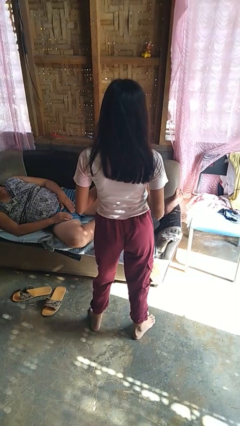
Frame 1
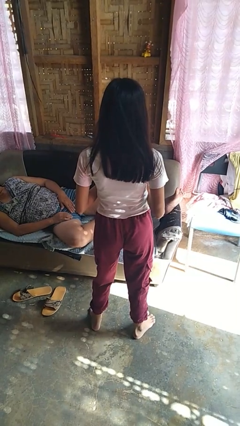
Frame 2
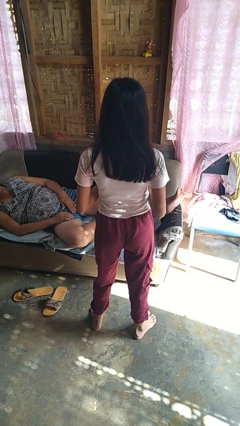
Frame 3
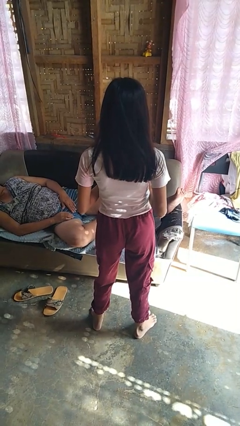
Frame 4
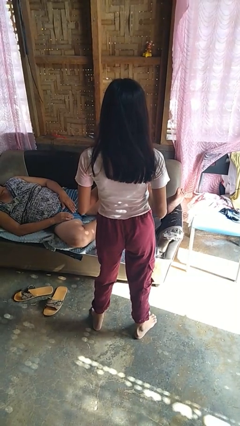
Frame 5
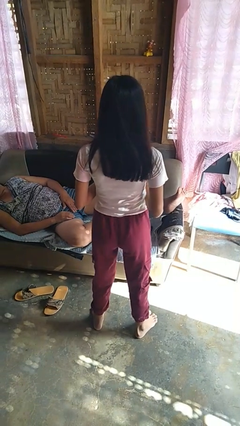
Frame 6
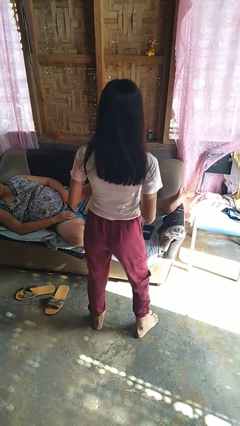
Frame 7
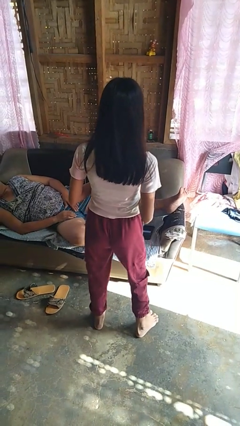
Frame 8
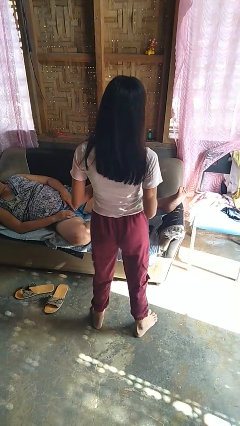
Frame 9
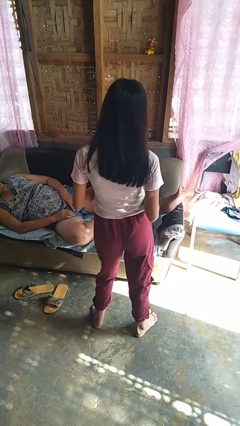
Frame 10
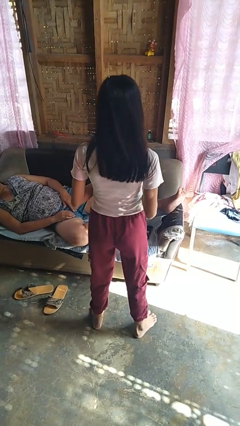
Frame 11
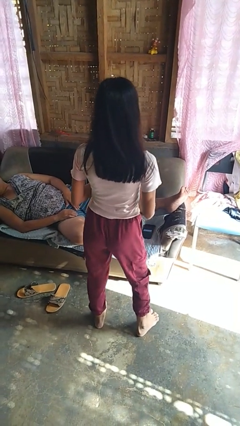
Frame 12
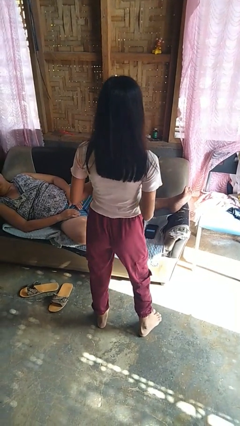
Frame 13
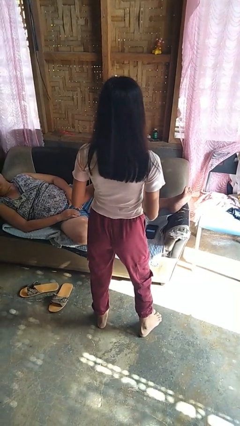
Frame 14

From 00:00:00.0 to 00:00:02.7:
person wiggles hips

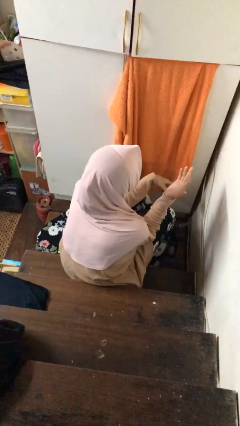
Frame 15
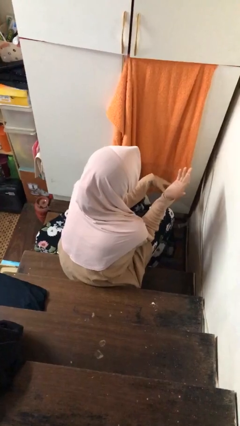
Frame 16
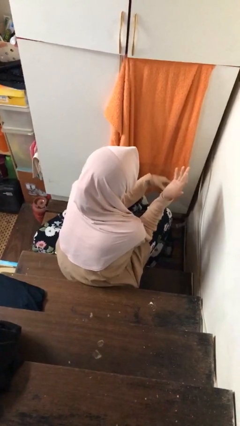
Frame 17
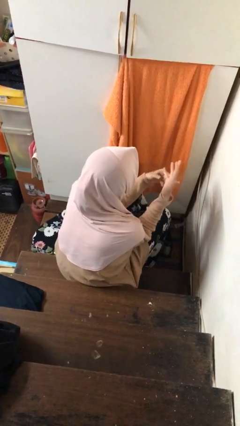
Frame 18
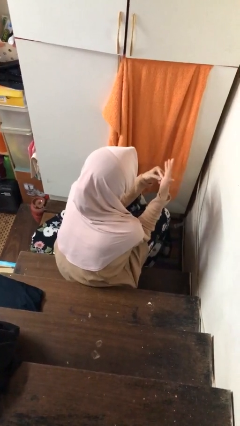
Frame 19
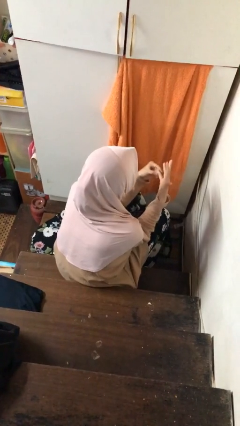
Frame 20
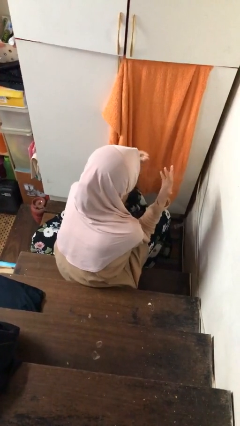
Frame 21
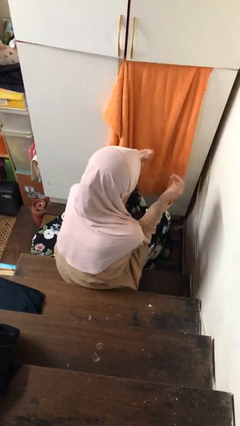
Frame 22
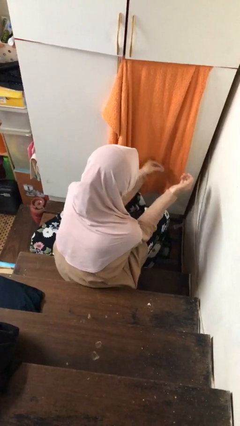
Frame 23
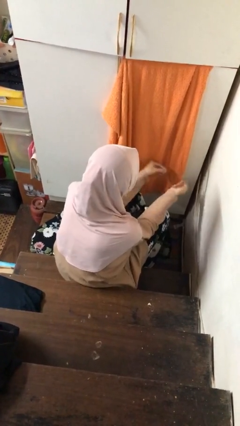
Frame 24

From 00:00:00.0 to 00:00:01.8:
person takes off ring

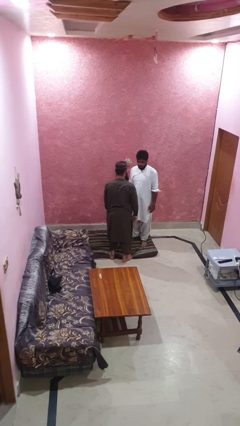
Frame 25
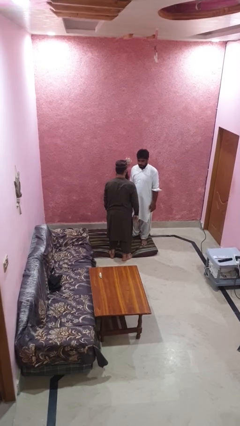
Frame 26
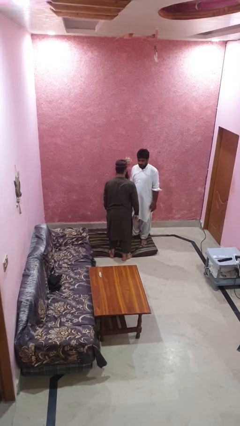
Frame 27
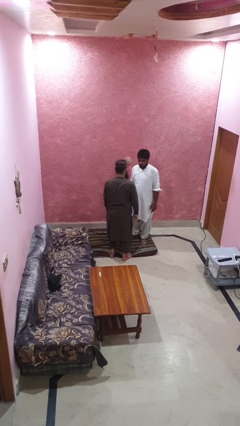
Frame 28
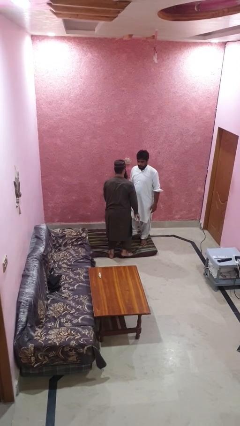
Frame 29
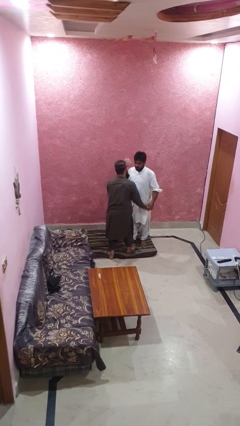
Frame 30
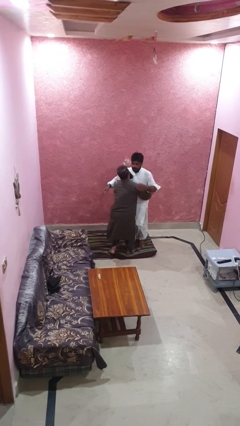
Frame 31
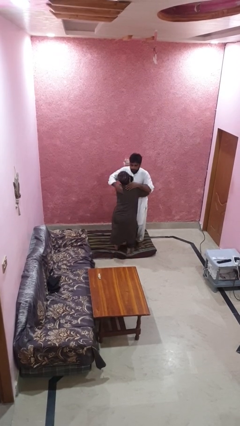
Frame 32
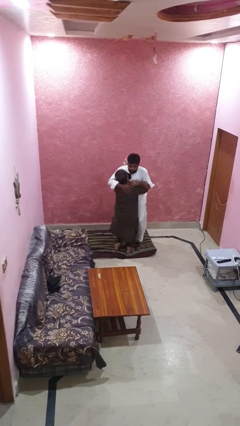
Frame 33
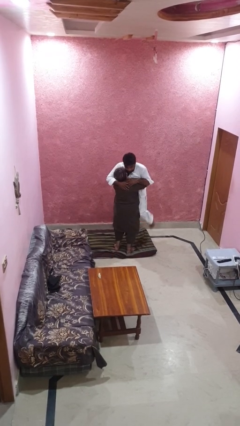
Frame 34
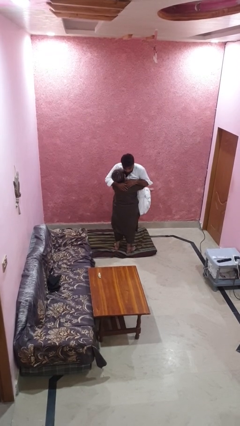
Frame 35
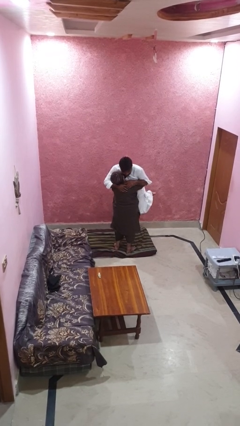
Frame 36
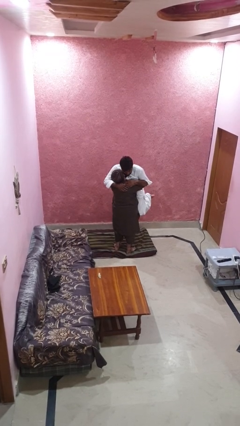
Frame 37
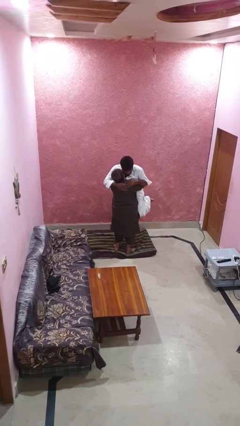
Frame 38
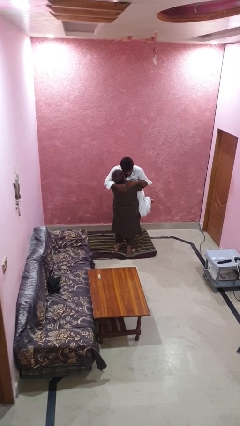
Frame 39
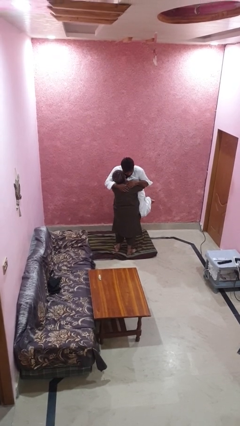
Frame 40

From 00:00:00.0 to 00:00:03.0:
person picks up person

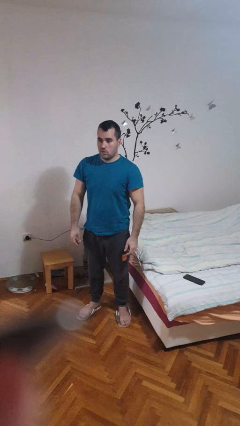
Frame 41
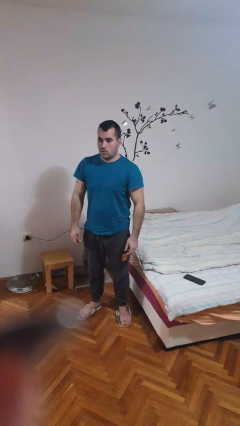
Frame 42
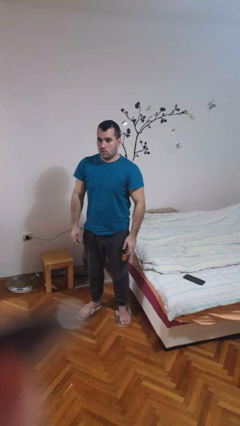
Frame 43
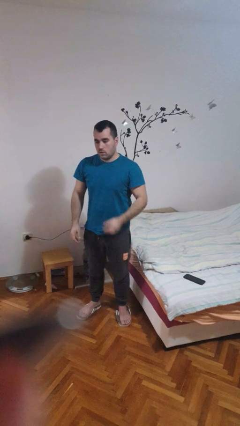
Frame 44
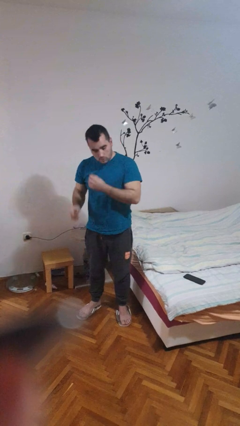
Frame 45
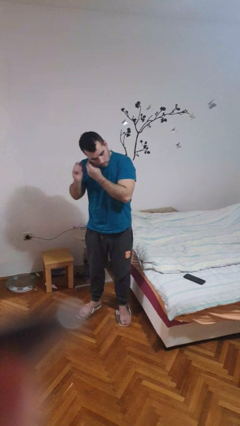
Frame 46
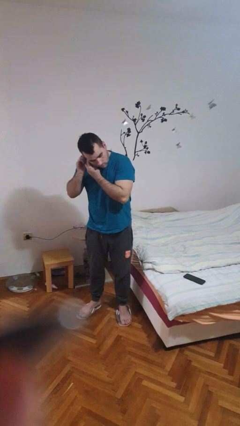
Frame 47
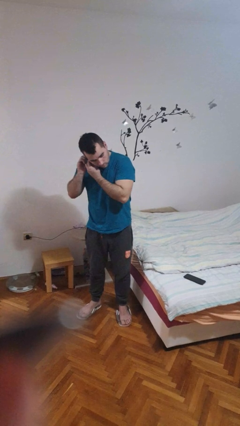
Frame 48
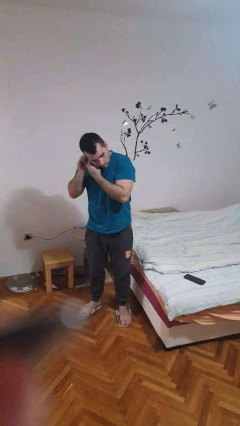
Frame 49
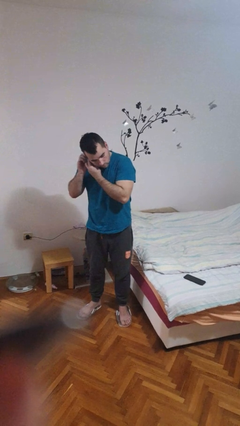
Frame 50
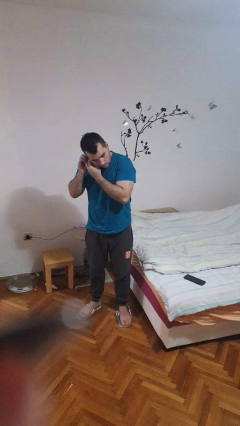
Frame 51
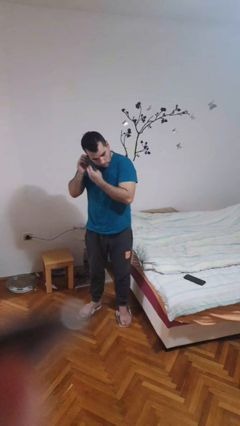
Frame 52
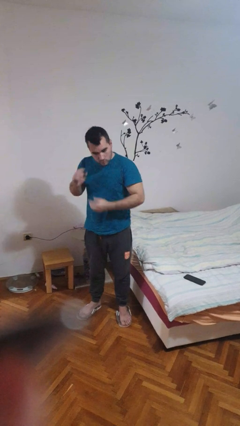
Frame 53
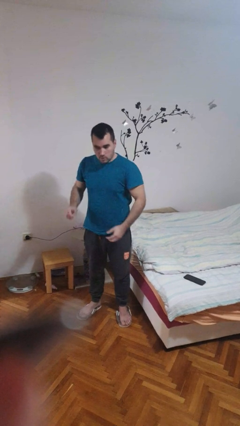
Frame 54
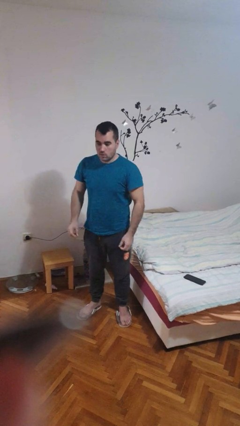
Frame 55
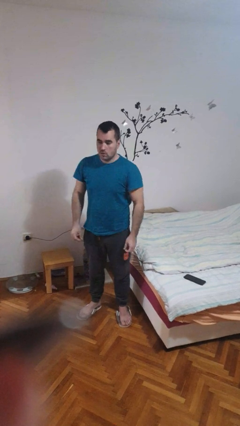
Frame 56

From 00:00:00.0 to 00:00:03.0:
person puts on earrings

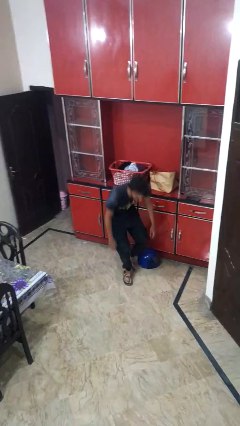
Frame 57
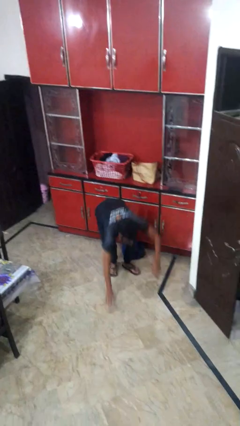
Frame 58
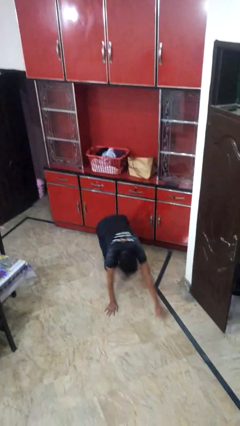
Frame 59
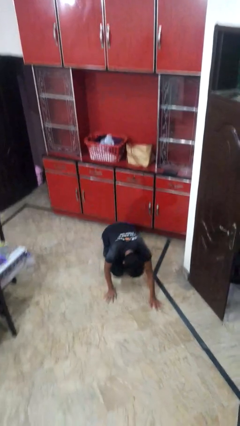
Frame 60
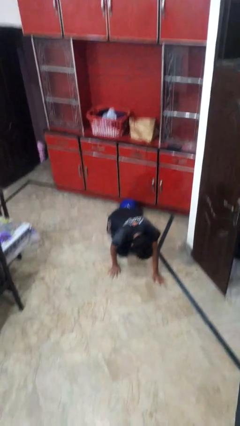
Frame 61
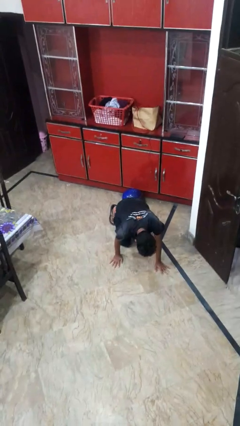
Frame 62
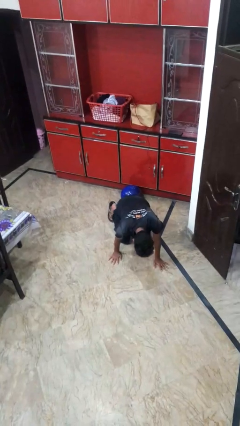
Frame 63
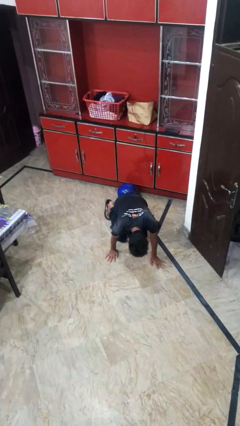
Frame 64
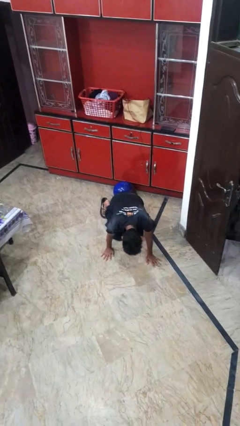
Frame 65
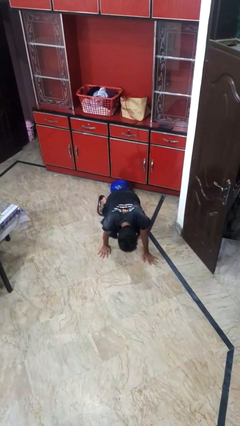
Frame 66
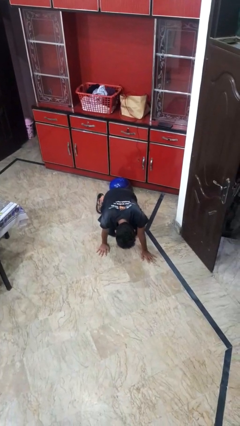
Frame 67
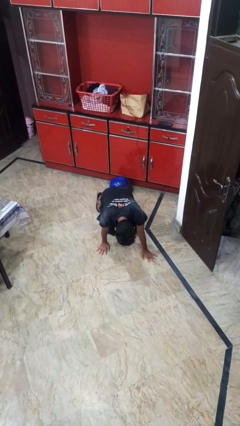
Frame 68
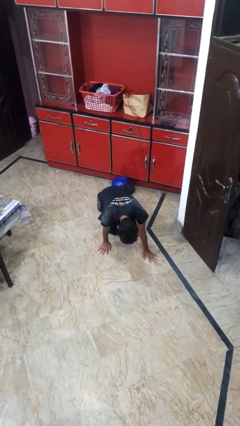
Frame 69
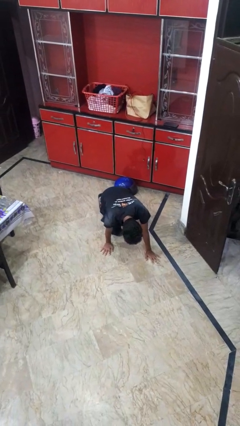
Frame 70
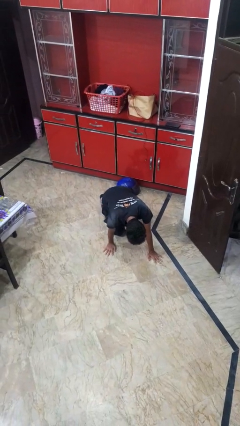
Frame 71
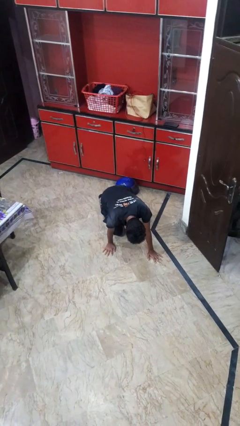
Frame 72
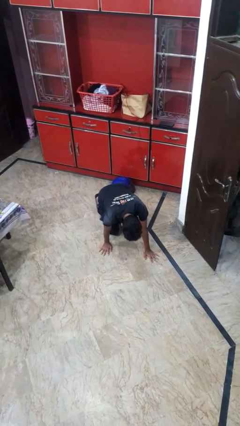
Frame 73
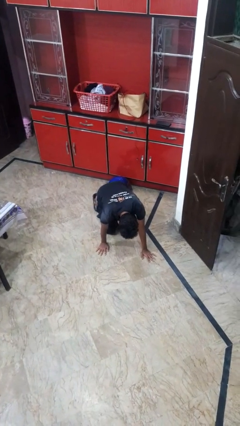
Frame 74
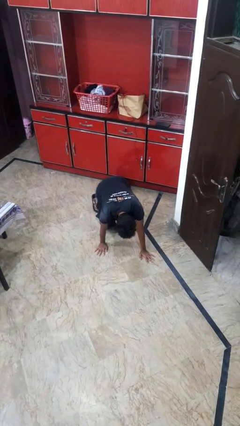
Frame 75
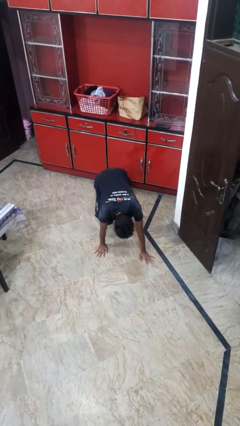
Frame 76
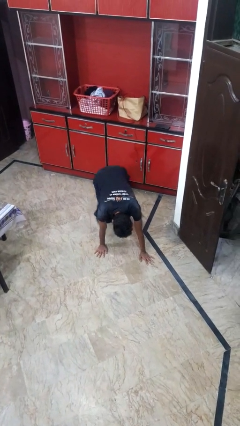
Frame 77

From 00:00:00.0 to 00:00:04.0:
person trips on object on floor

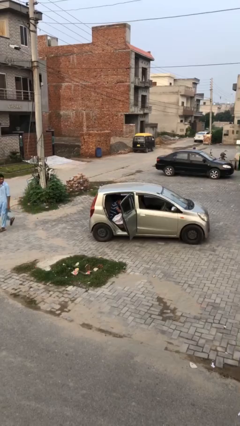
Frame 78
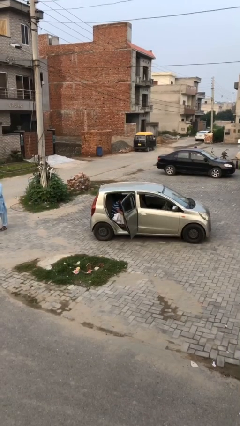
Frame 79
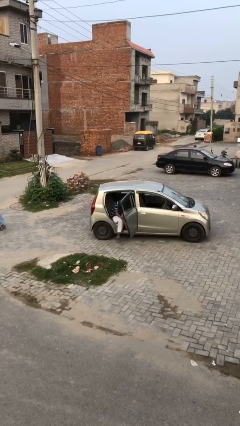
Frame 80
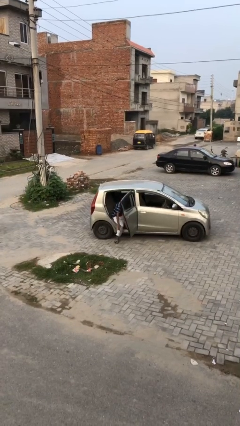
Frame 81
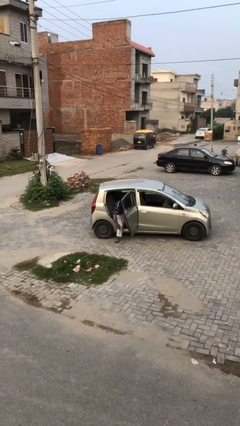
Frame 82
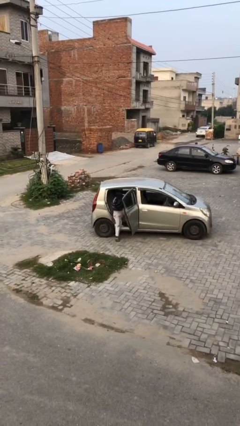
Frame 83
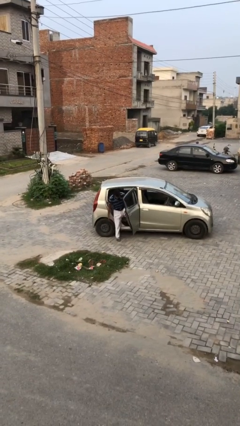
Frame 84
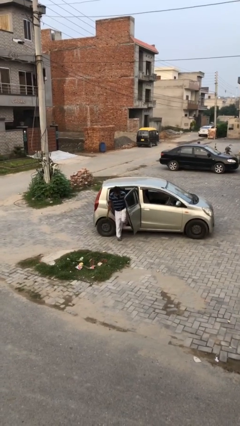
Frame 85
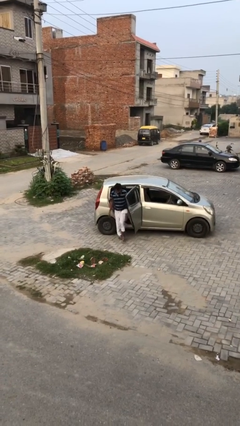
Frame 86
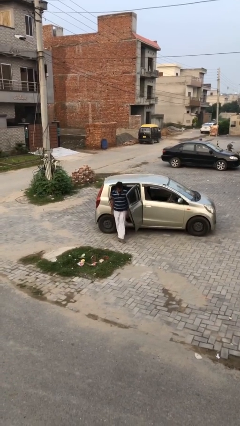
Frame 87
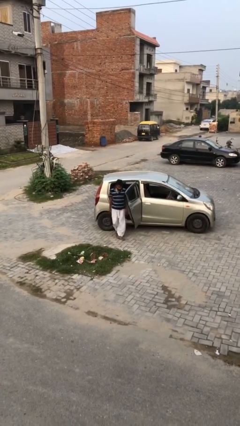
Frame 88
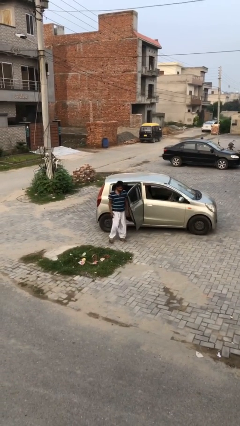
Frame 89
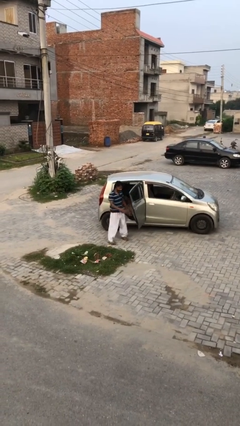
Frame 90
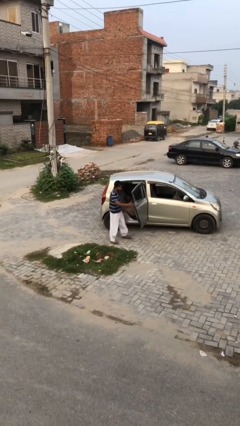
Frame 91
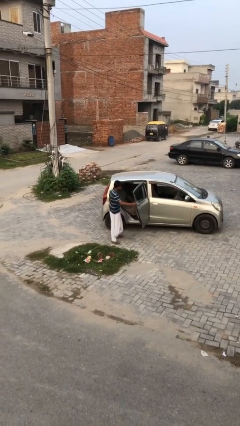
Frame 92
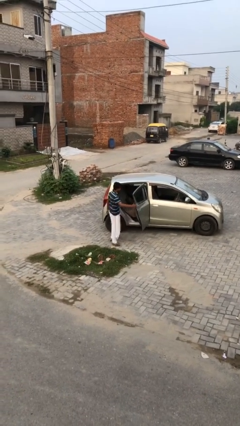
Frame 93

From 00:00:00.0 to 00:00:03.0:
person exits car
